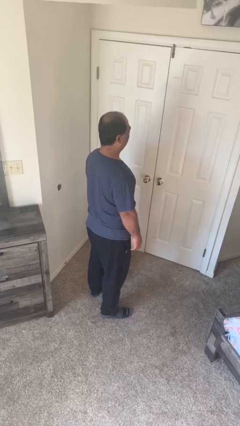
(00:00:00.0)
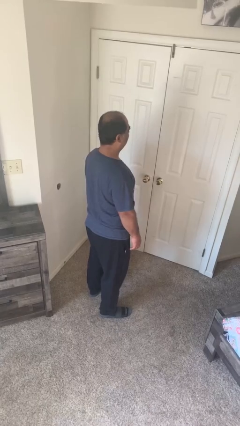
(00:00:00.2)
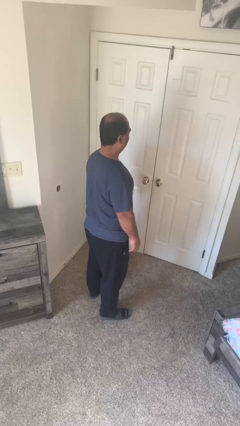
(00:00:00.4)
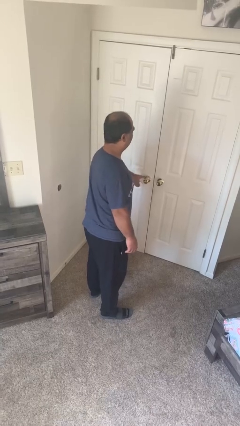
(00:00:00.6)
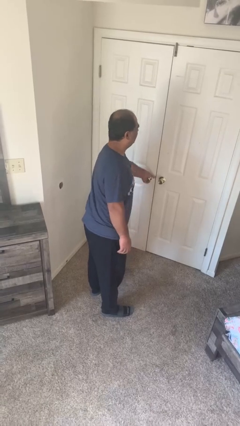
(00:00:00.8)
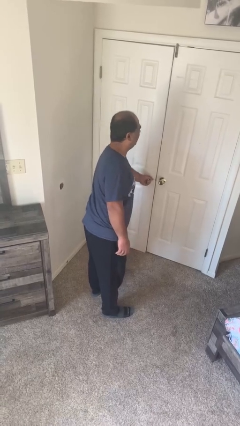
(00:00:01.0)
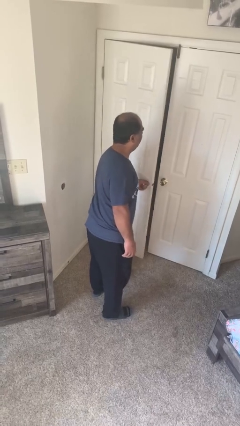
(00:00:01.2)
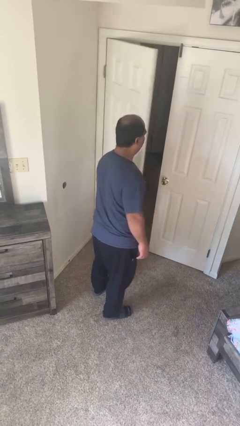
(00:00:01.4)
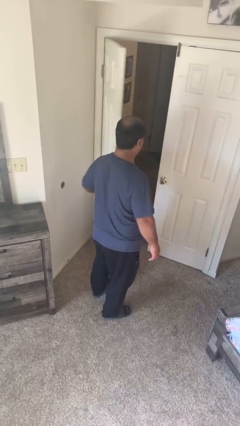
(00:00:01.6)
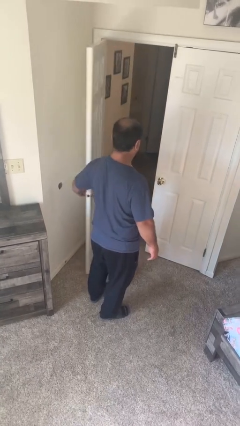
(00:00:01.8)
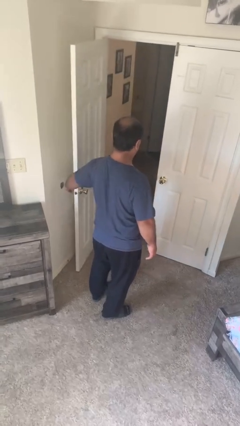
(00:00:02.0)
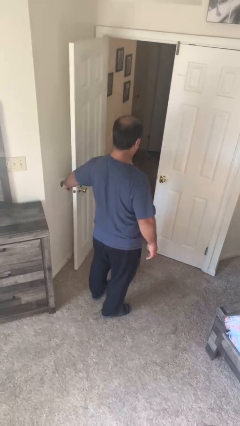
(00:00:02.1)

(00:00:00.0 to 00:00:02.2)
person opens facility door

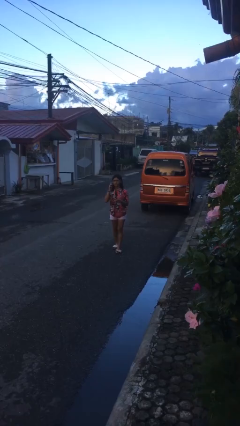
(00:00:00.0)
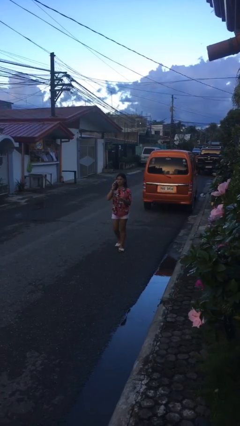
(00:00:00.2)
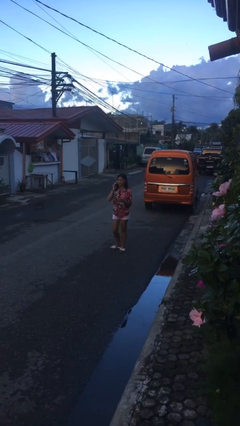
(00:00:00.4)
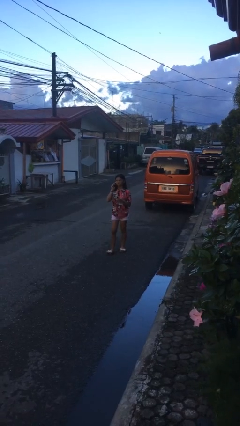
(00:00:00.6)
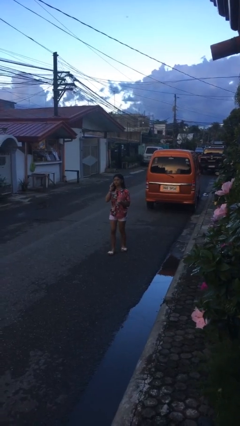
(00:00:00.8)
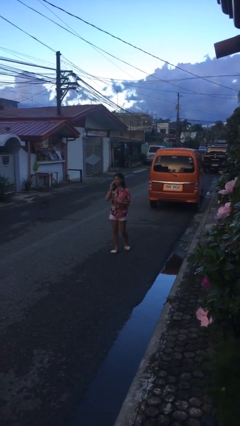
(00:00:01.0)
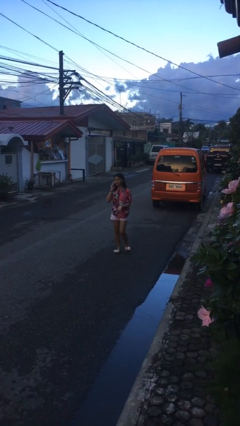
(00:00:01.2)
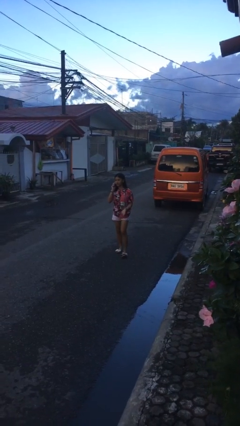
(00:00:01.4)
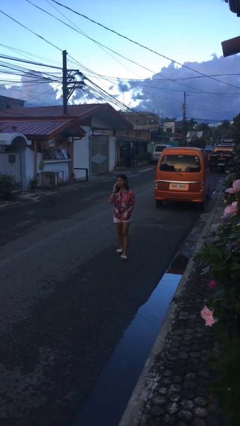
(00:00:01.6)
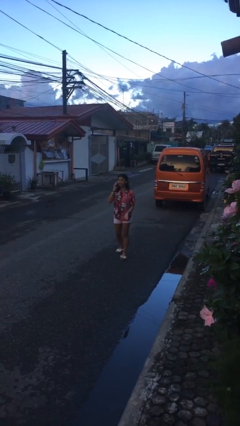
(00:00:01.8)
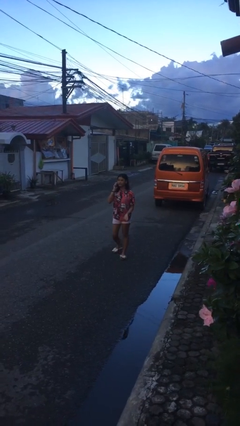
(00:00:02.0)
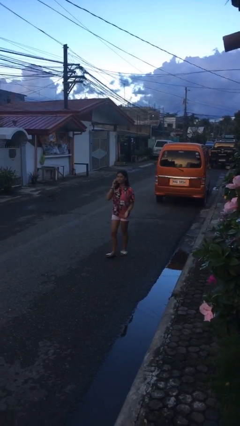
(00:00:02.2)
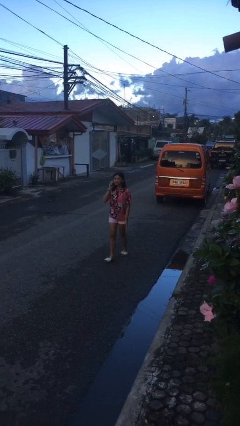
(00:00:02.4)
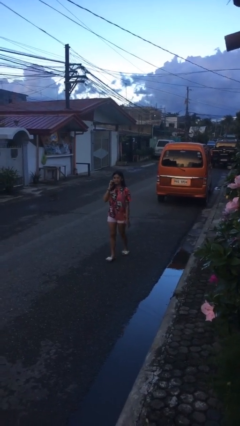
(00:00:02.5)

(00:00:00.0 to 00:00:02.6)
person talks on phone

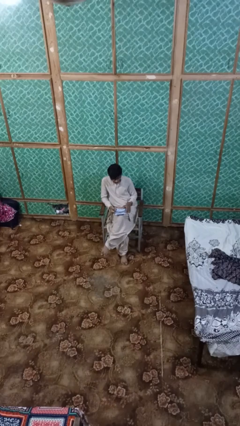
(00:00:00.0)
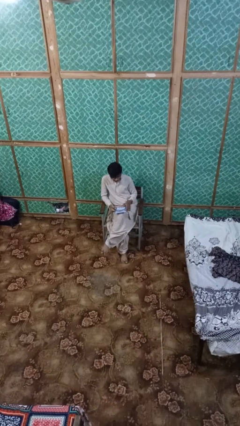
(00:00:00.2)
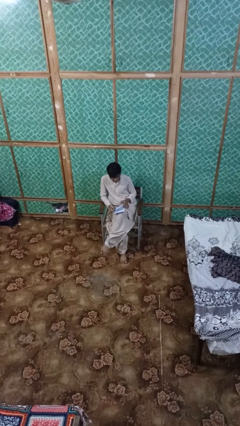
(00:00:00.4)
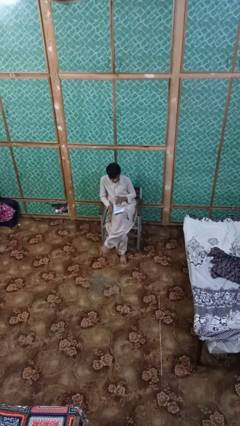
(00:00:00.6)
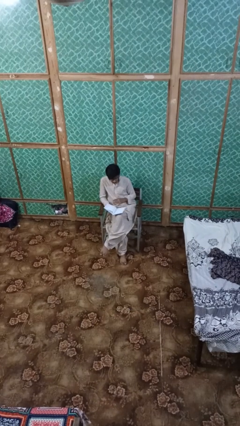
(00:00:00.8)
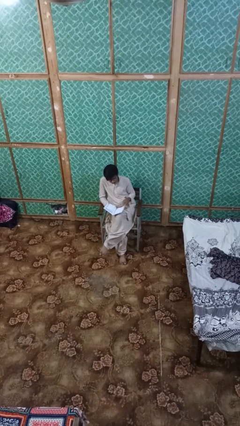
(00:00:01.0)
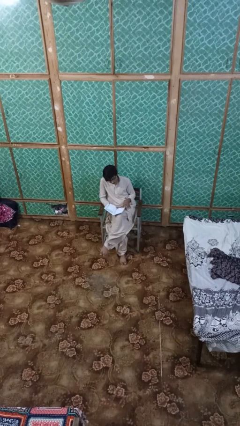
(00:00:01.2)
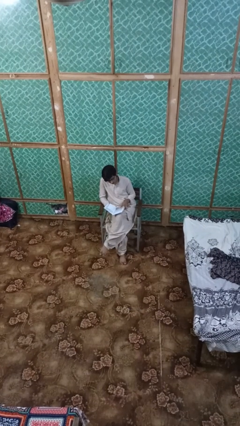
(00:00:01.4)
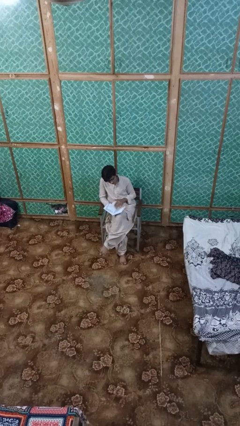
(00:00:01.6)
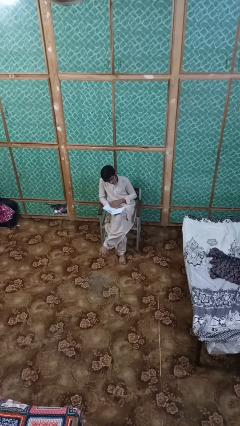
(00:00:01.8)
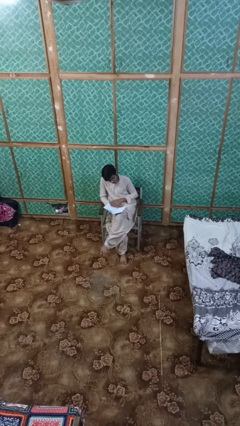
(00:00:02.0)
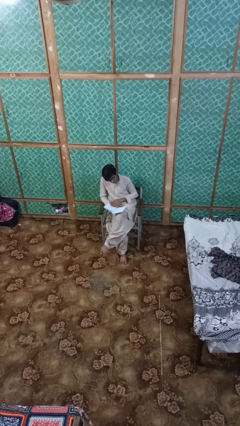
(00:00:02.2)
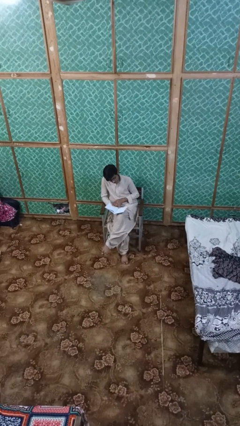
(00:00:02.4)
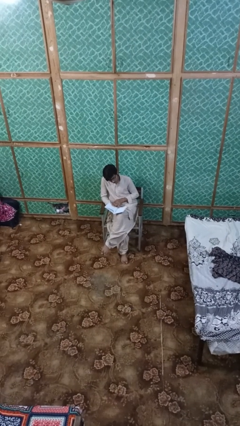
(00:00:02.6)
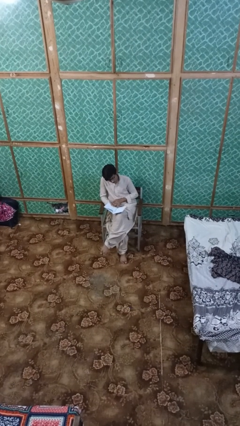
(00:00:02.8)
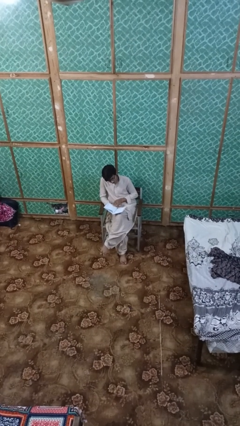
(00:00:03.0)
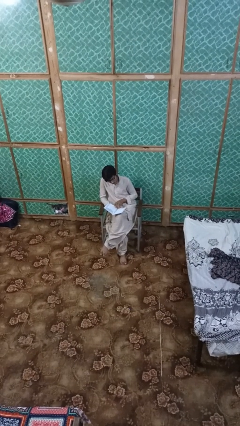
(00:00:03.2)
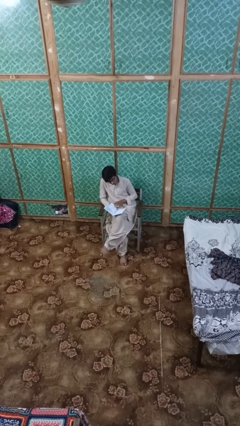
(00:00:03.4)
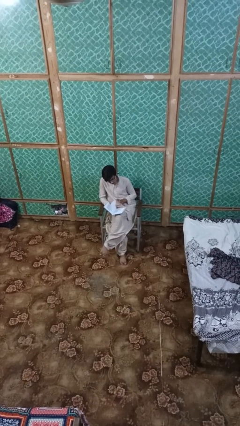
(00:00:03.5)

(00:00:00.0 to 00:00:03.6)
person reads magazine

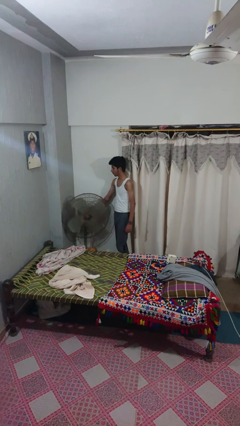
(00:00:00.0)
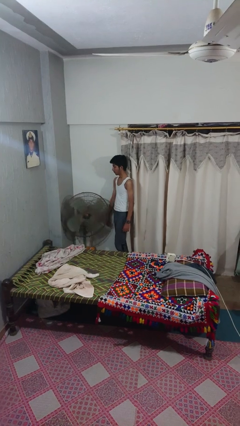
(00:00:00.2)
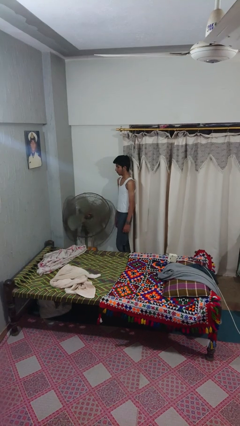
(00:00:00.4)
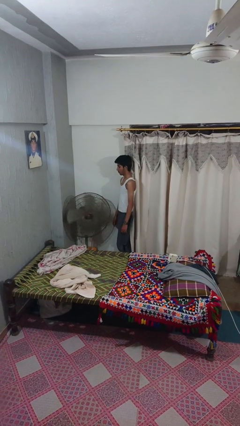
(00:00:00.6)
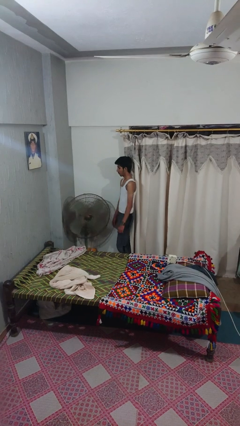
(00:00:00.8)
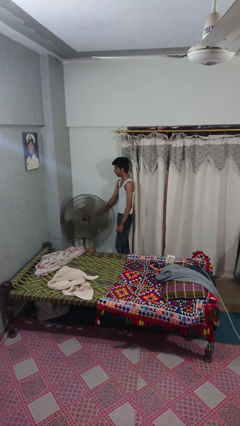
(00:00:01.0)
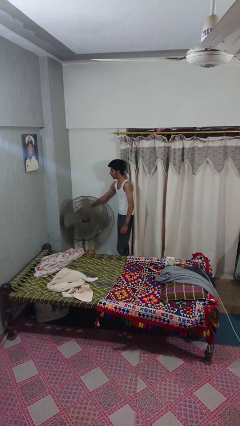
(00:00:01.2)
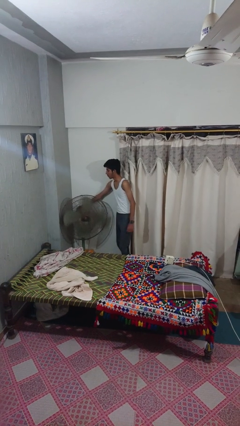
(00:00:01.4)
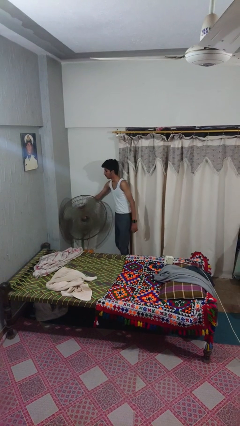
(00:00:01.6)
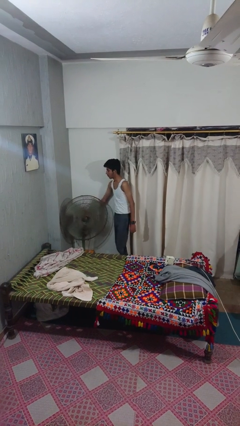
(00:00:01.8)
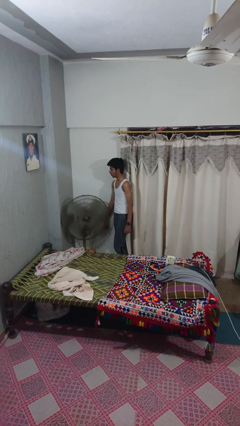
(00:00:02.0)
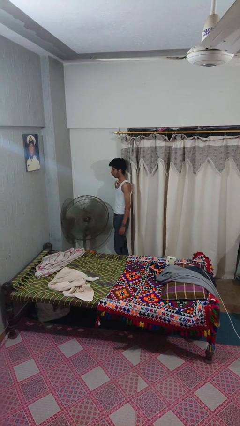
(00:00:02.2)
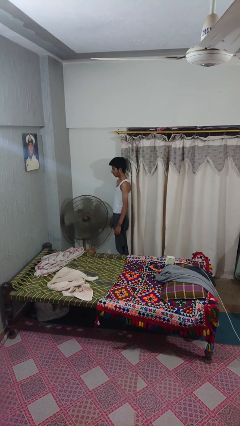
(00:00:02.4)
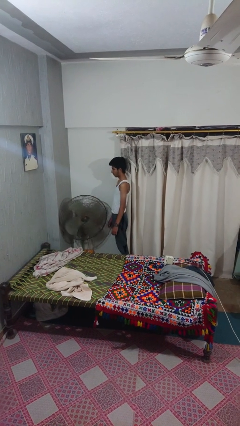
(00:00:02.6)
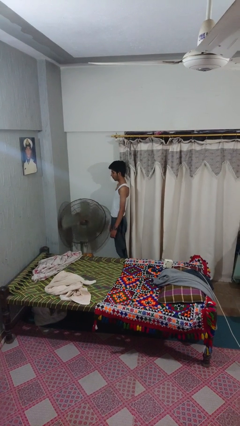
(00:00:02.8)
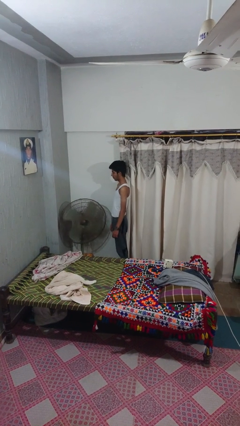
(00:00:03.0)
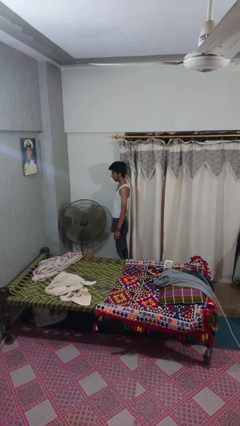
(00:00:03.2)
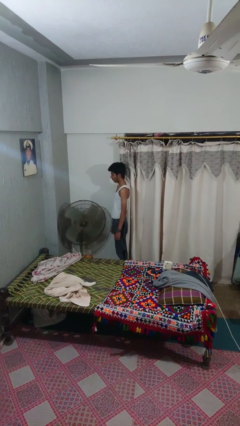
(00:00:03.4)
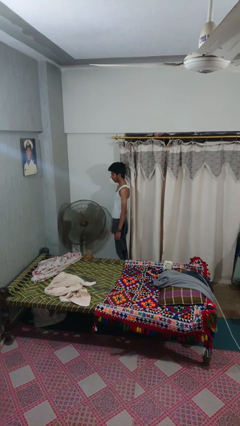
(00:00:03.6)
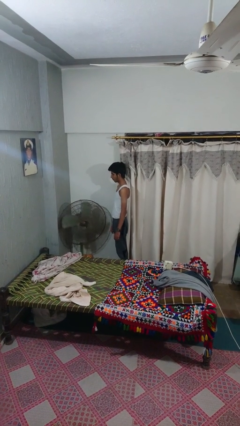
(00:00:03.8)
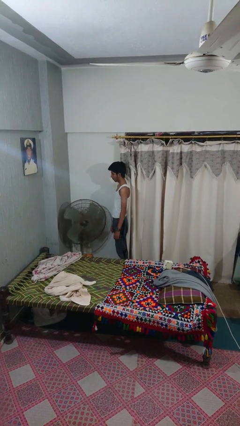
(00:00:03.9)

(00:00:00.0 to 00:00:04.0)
person turns off fan

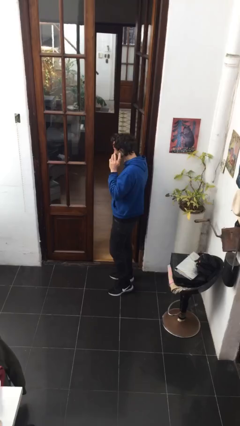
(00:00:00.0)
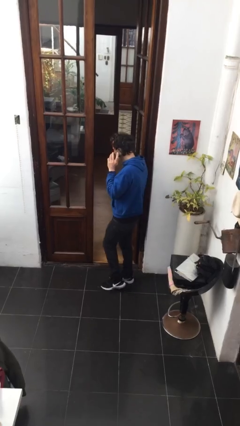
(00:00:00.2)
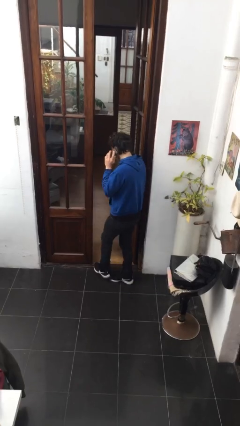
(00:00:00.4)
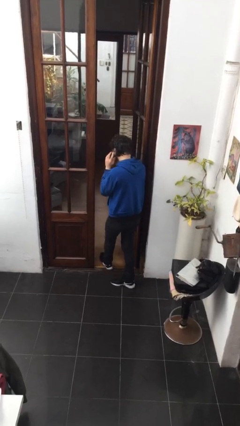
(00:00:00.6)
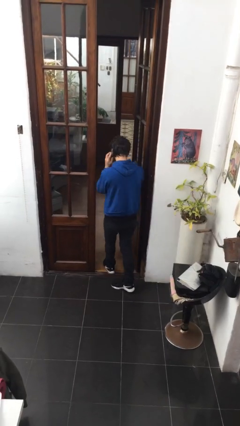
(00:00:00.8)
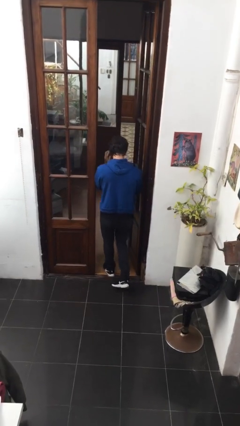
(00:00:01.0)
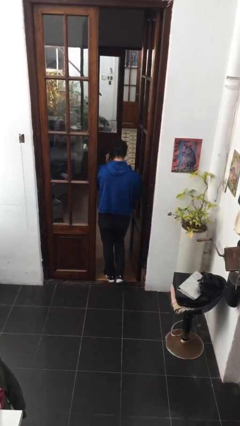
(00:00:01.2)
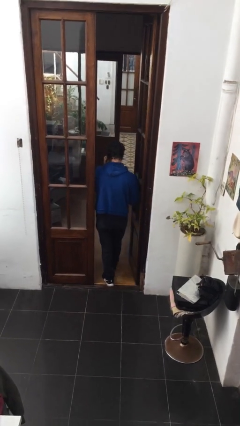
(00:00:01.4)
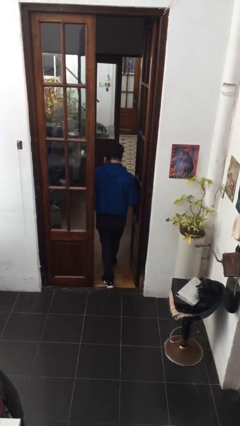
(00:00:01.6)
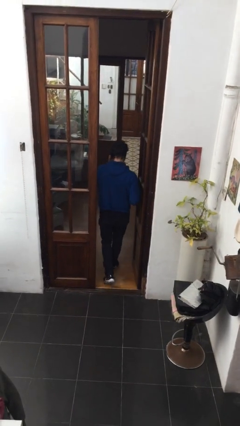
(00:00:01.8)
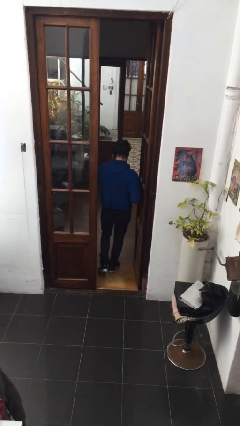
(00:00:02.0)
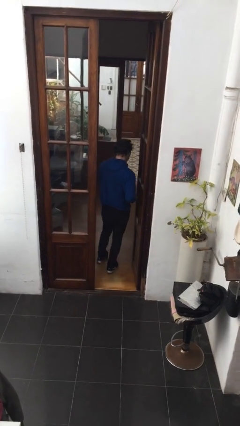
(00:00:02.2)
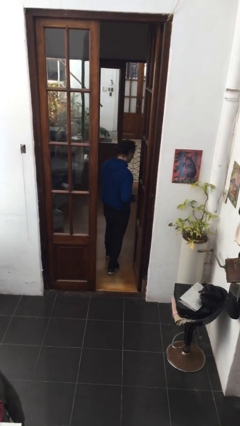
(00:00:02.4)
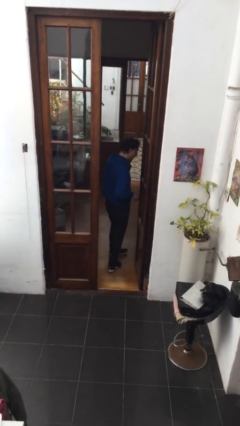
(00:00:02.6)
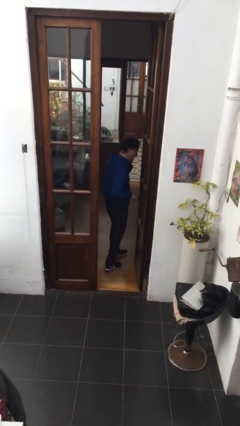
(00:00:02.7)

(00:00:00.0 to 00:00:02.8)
person exits scene through structure

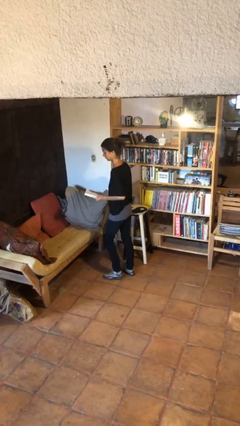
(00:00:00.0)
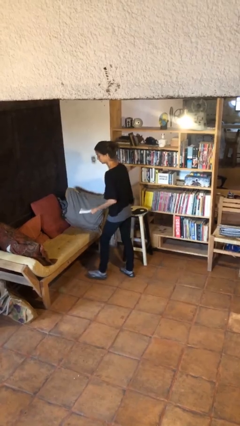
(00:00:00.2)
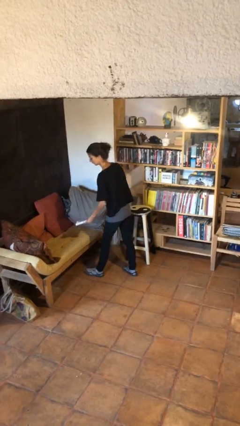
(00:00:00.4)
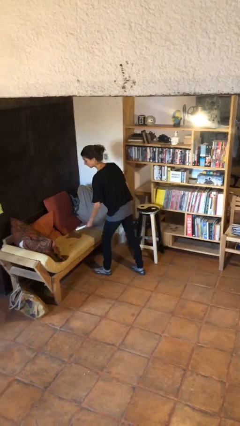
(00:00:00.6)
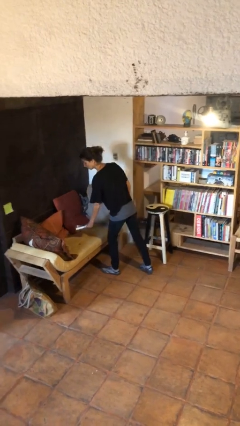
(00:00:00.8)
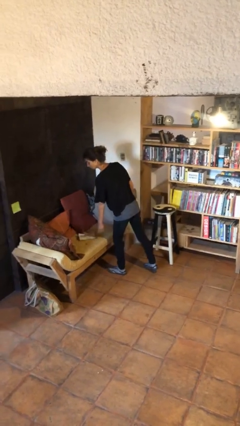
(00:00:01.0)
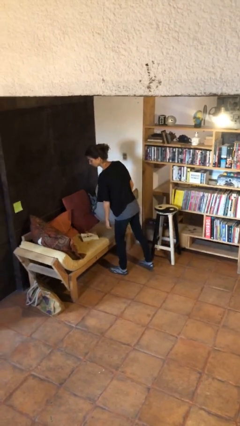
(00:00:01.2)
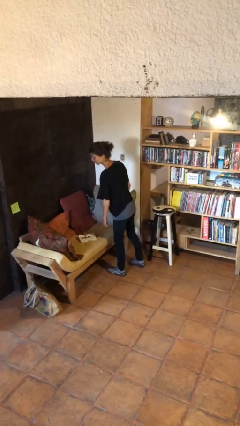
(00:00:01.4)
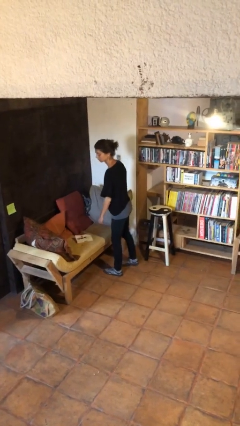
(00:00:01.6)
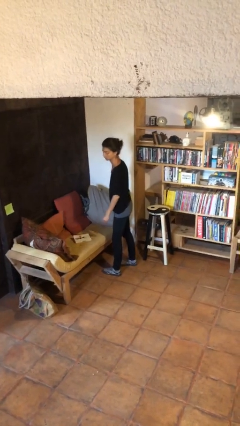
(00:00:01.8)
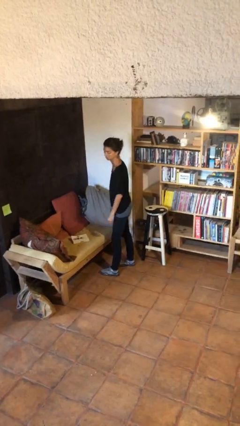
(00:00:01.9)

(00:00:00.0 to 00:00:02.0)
person puts down object on couch
